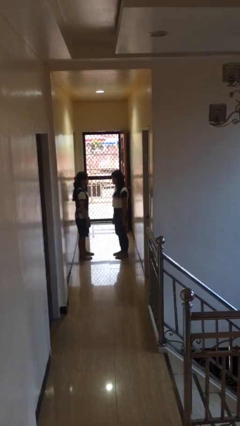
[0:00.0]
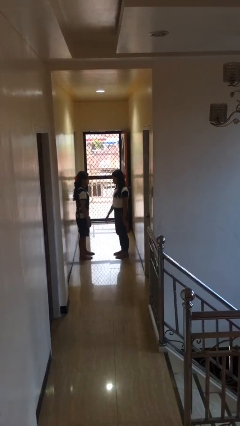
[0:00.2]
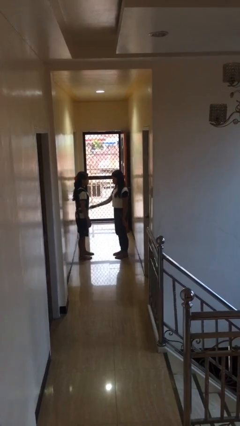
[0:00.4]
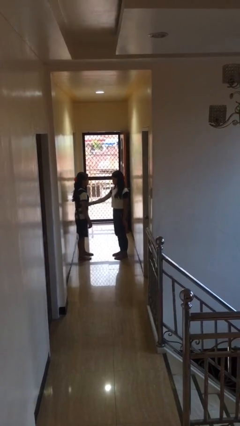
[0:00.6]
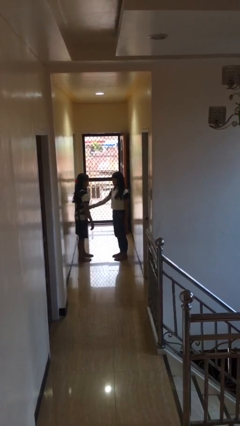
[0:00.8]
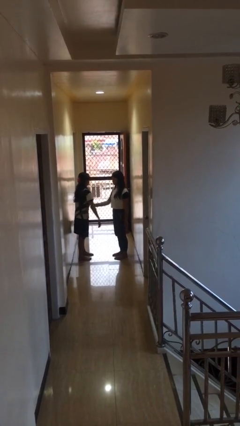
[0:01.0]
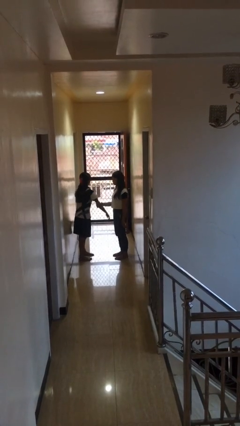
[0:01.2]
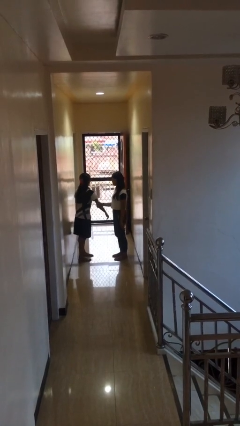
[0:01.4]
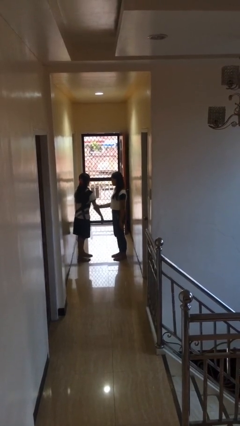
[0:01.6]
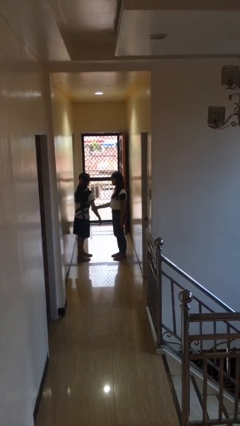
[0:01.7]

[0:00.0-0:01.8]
person grabs person by bicep

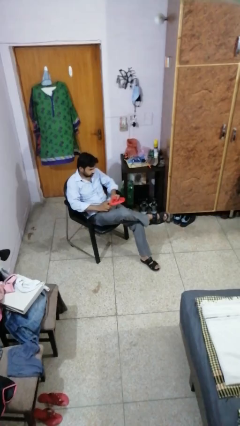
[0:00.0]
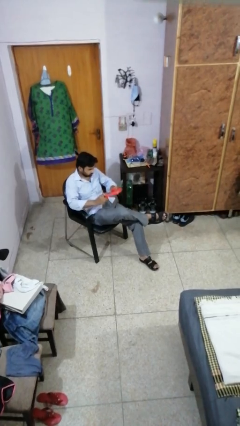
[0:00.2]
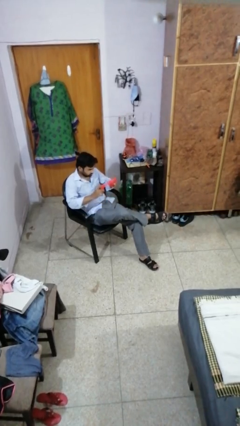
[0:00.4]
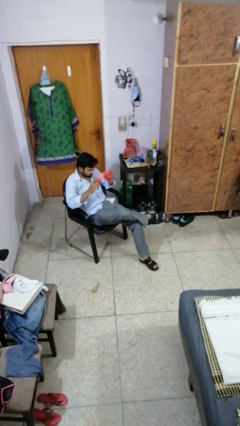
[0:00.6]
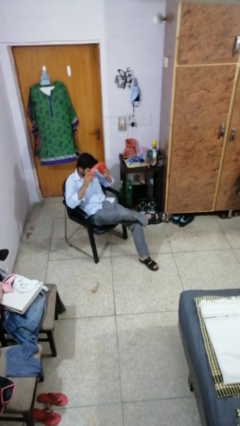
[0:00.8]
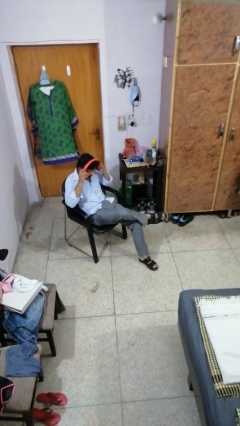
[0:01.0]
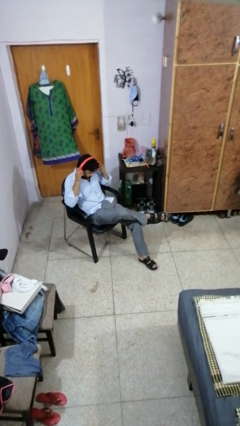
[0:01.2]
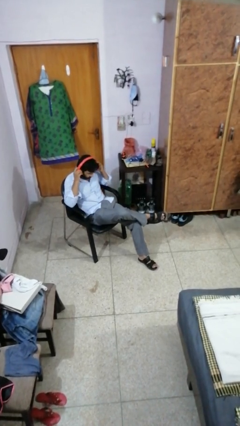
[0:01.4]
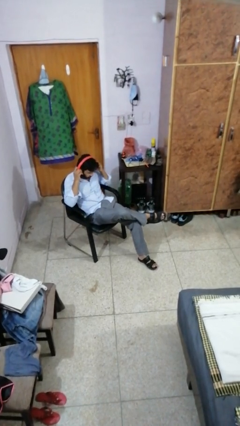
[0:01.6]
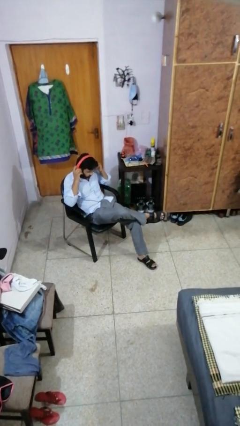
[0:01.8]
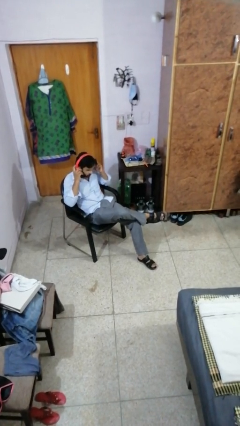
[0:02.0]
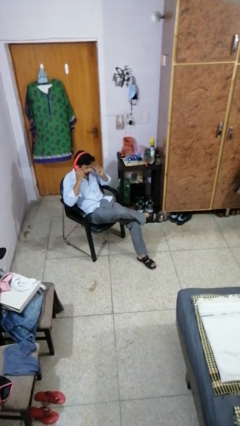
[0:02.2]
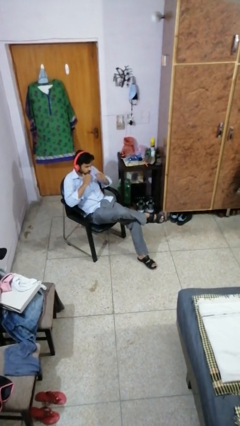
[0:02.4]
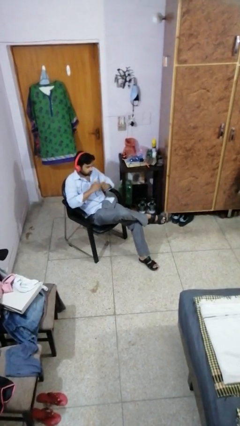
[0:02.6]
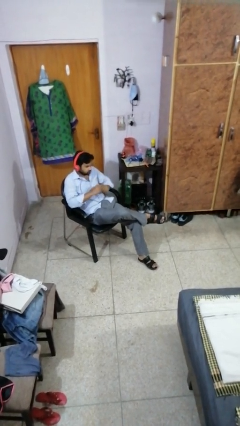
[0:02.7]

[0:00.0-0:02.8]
person puts on headphones

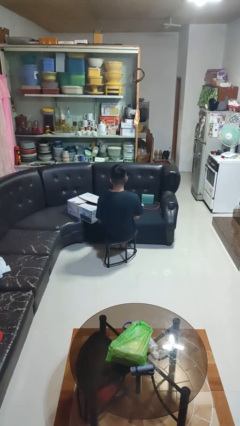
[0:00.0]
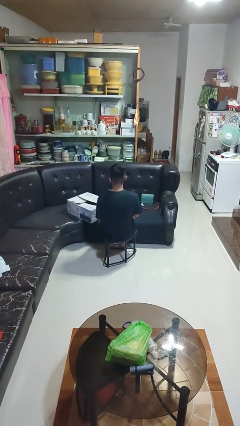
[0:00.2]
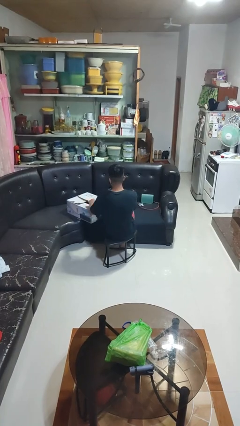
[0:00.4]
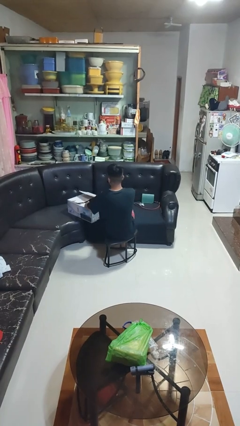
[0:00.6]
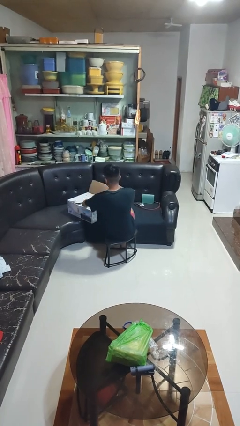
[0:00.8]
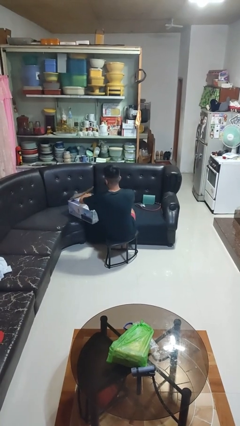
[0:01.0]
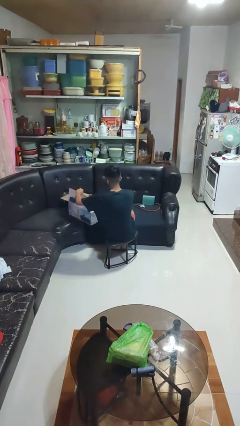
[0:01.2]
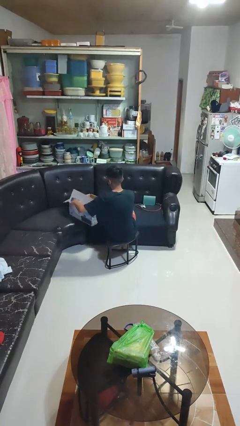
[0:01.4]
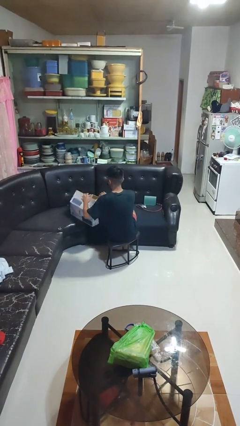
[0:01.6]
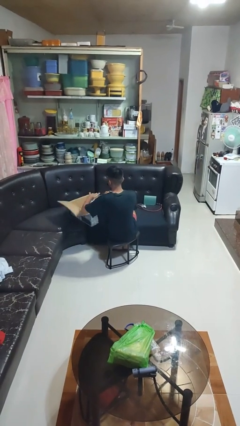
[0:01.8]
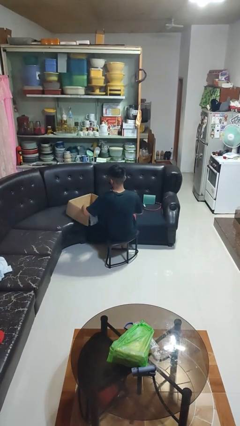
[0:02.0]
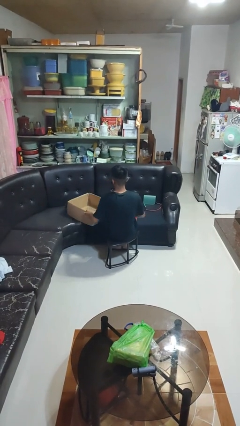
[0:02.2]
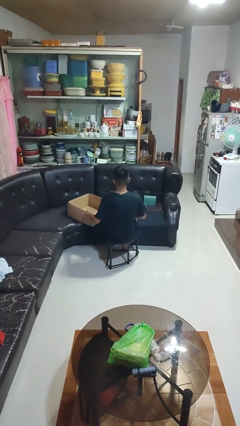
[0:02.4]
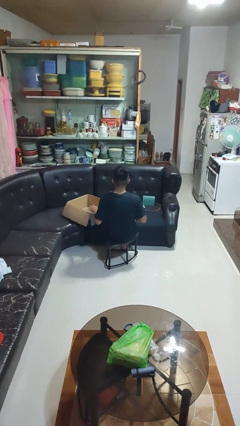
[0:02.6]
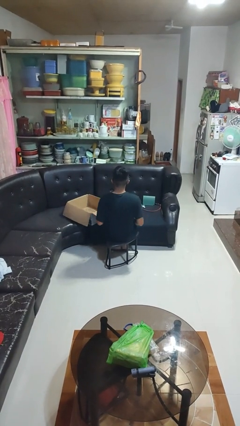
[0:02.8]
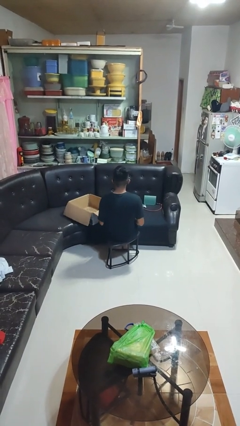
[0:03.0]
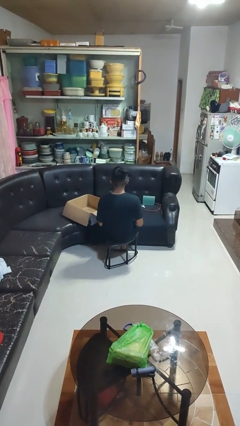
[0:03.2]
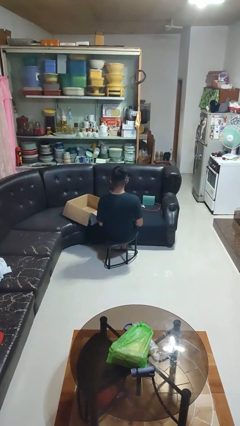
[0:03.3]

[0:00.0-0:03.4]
person opens box

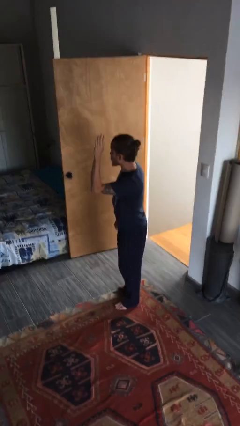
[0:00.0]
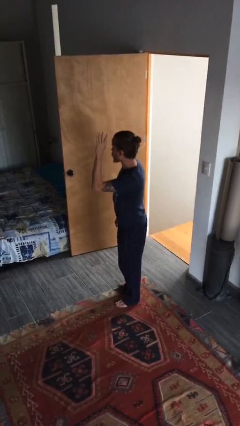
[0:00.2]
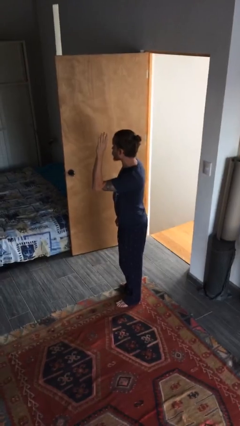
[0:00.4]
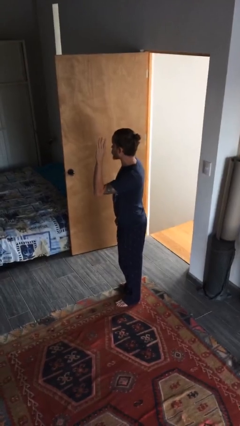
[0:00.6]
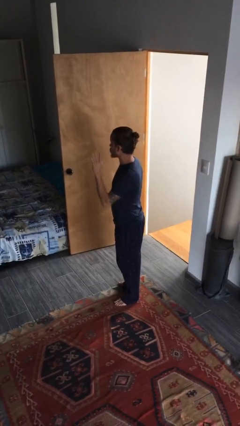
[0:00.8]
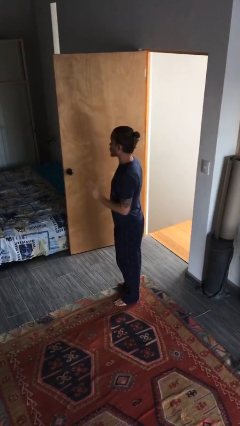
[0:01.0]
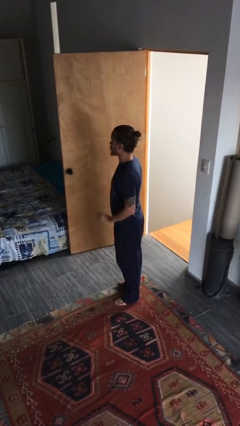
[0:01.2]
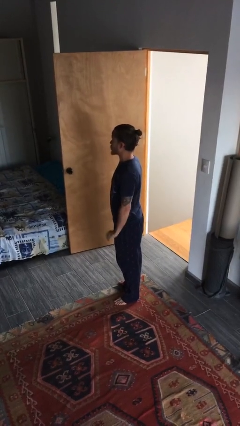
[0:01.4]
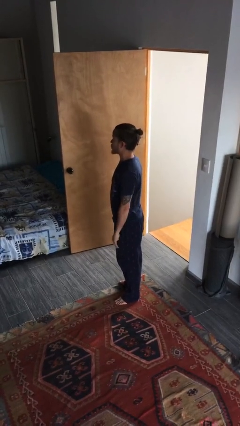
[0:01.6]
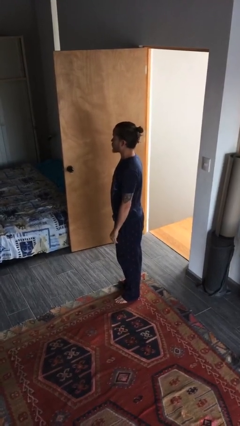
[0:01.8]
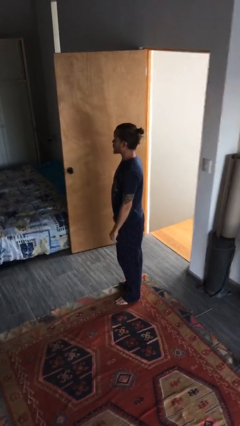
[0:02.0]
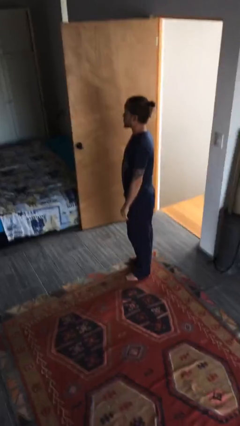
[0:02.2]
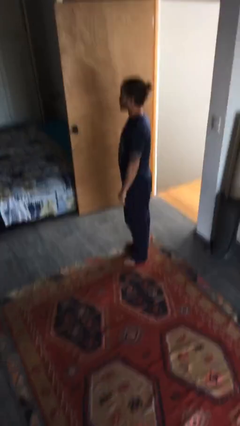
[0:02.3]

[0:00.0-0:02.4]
person gestures lower hand

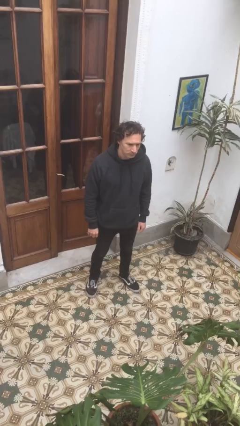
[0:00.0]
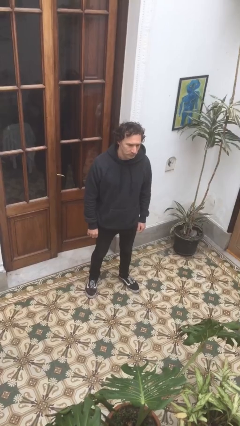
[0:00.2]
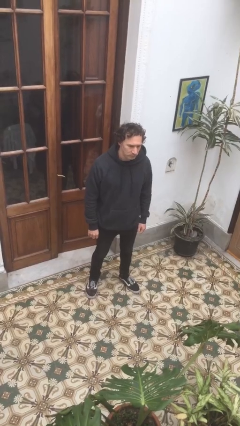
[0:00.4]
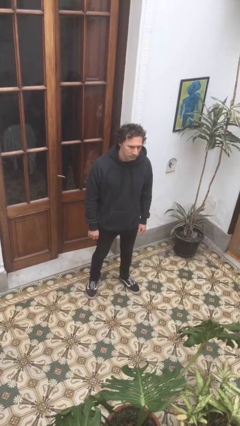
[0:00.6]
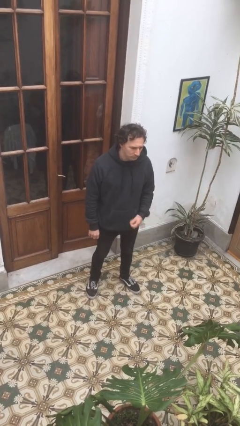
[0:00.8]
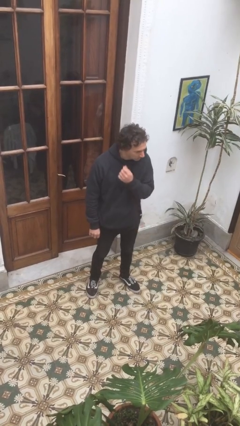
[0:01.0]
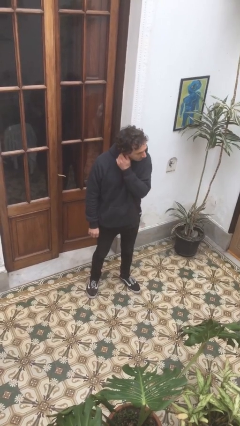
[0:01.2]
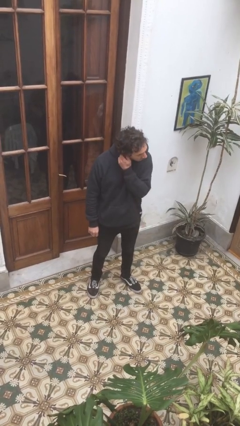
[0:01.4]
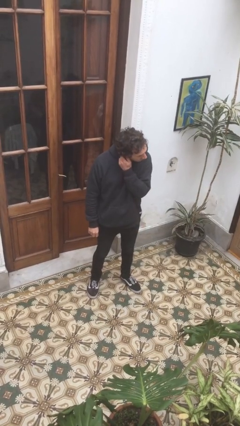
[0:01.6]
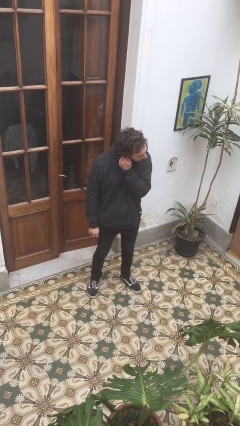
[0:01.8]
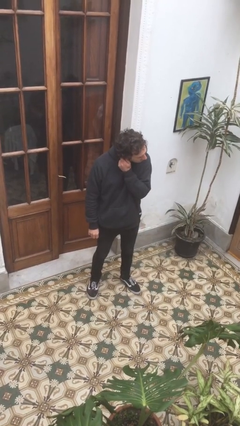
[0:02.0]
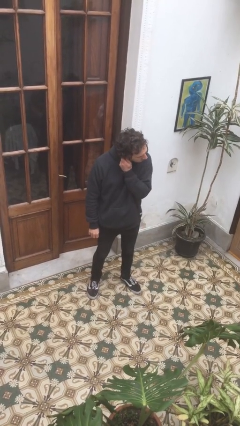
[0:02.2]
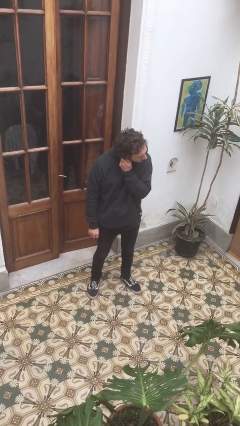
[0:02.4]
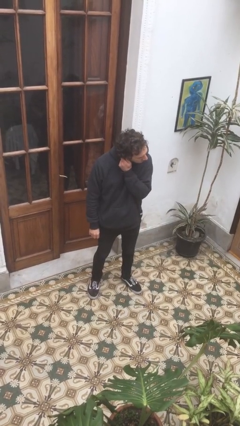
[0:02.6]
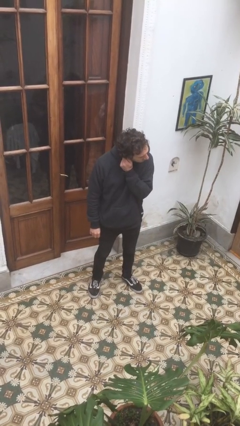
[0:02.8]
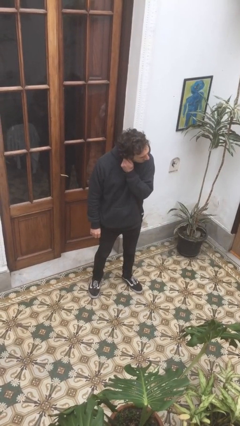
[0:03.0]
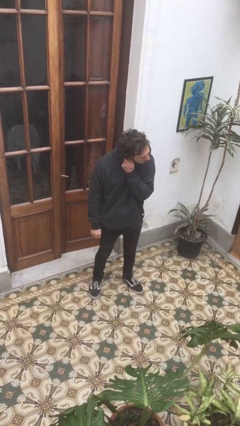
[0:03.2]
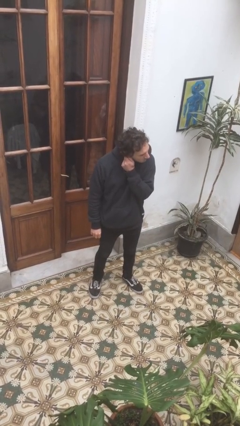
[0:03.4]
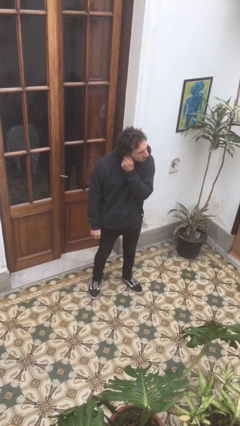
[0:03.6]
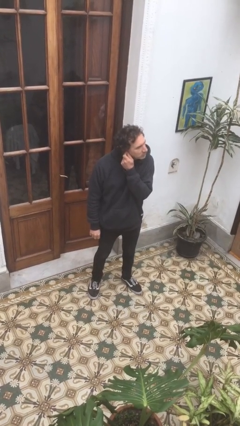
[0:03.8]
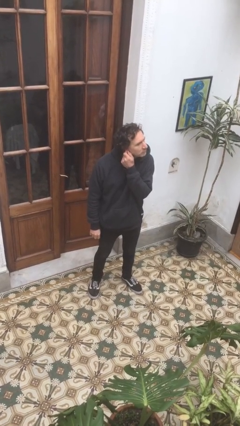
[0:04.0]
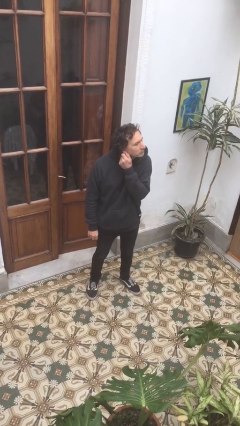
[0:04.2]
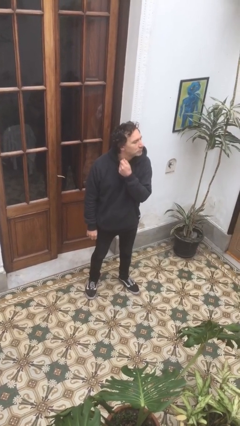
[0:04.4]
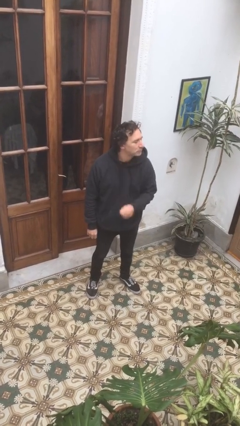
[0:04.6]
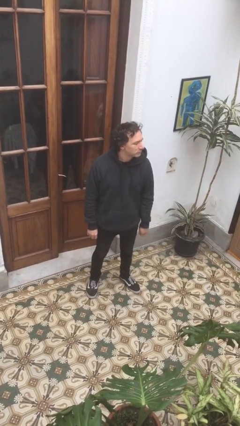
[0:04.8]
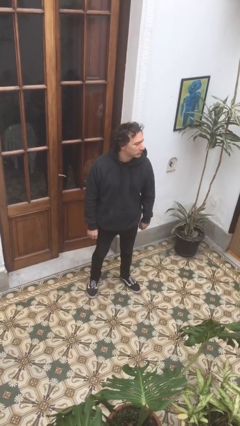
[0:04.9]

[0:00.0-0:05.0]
person touches earlobe

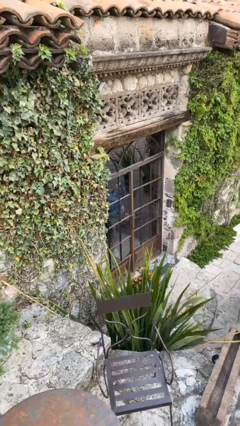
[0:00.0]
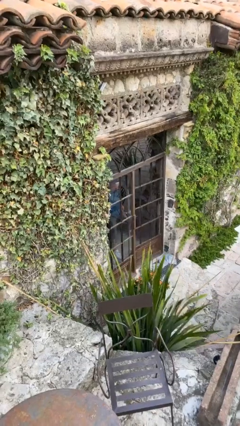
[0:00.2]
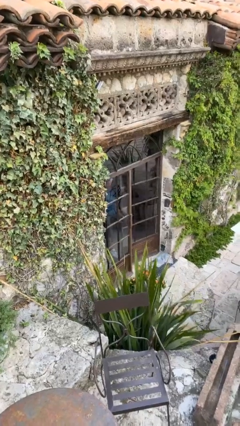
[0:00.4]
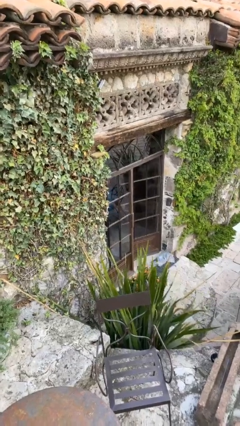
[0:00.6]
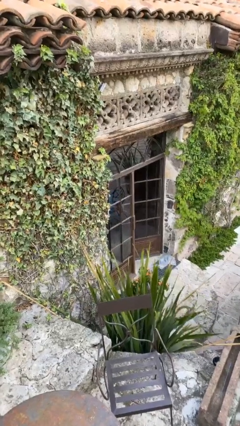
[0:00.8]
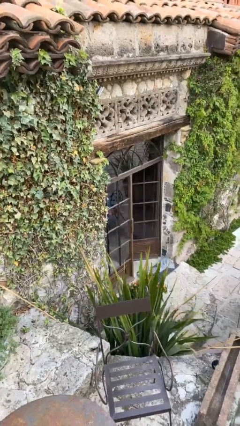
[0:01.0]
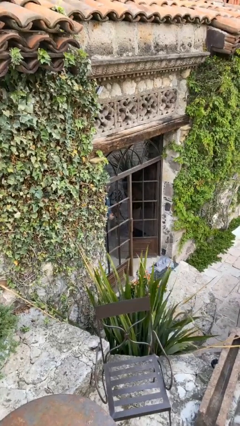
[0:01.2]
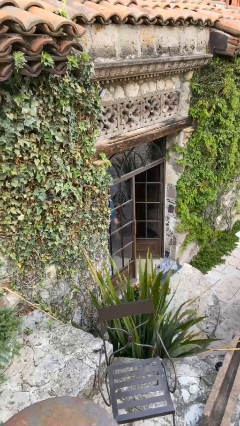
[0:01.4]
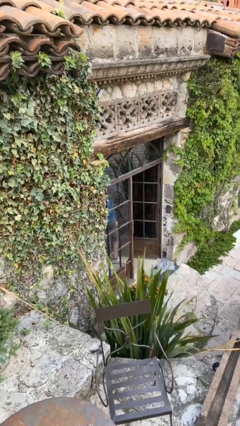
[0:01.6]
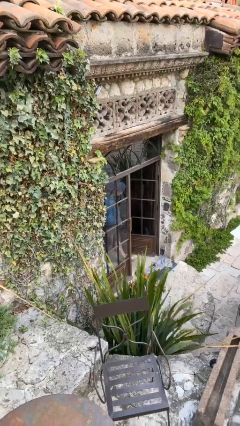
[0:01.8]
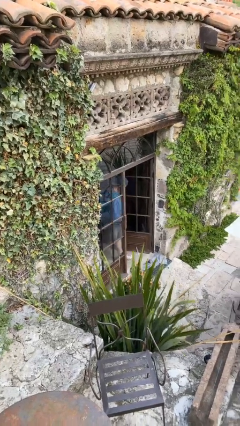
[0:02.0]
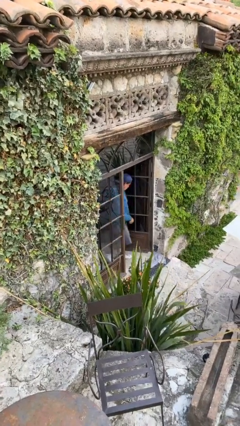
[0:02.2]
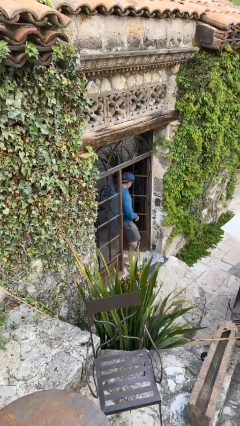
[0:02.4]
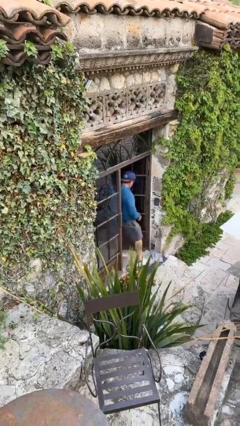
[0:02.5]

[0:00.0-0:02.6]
person opens facility door
